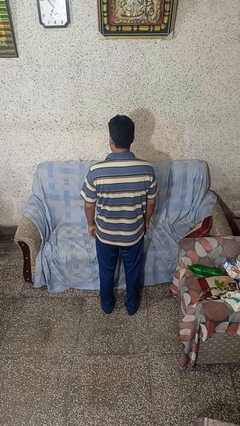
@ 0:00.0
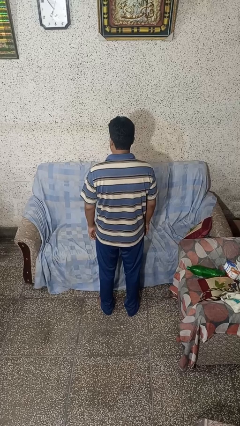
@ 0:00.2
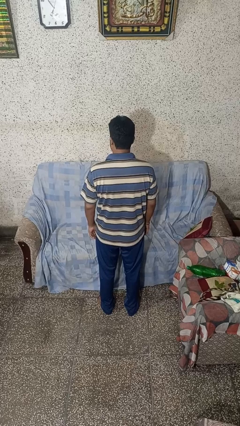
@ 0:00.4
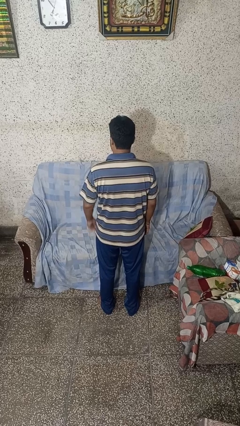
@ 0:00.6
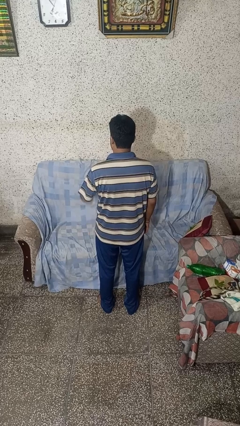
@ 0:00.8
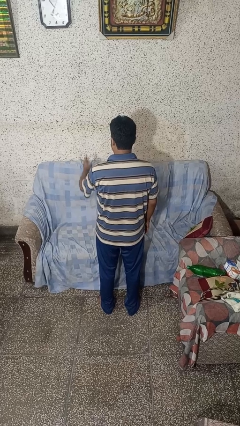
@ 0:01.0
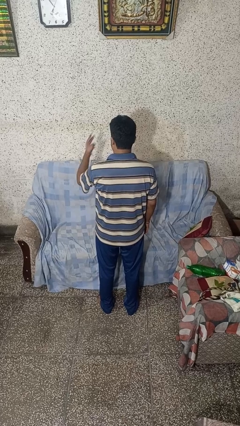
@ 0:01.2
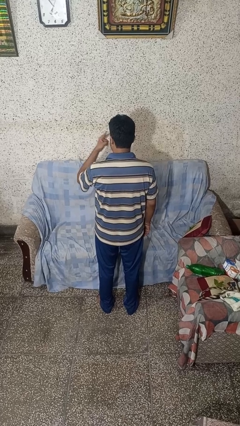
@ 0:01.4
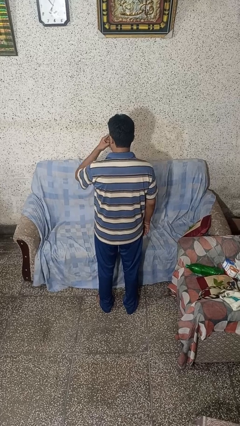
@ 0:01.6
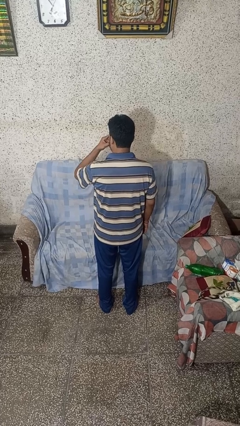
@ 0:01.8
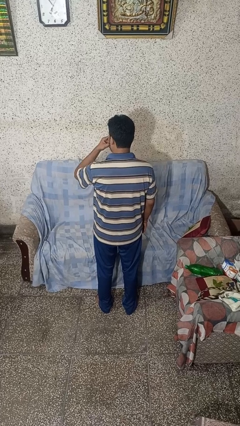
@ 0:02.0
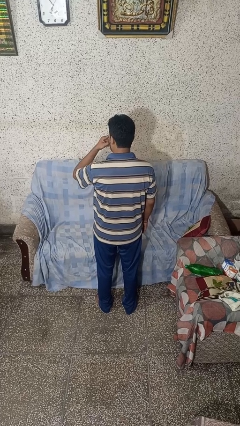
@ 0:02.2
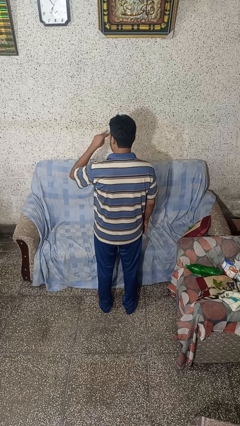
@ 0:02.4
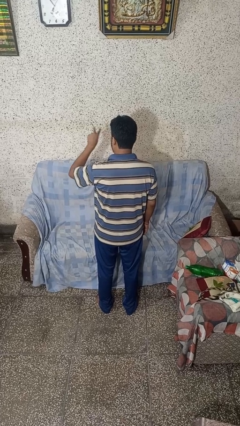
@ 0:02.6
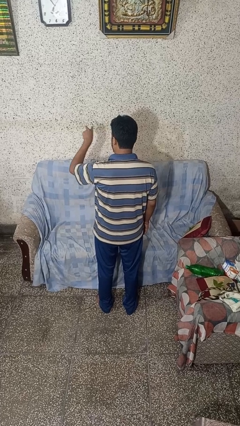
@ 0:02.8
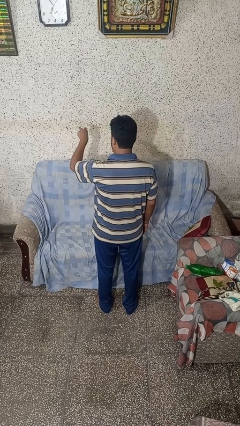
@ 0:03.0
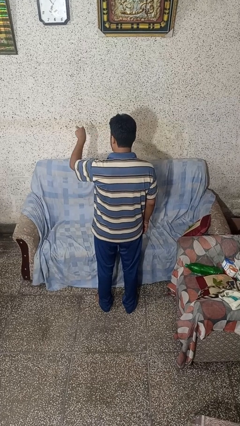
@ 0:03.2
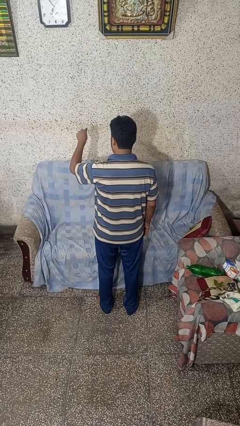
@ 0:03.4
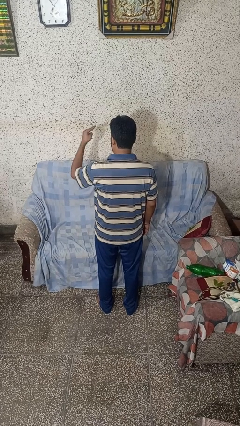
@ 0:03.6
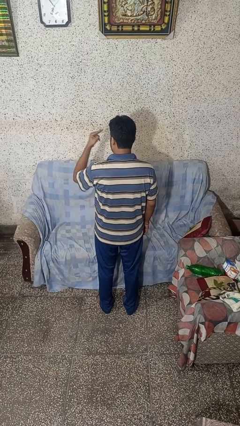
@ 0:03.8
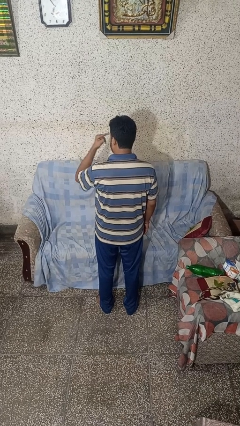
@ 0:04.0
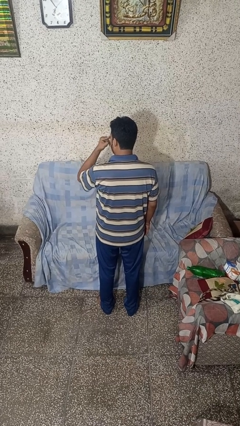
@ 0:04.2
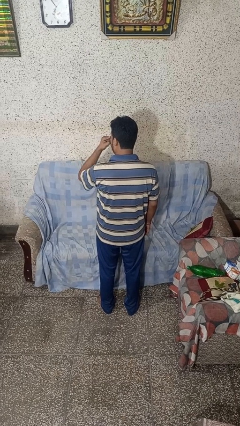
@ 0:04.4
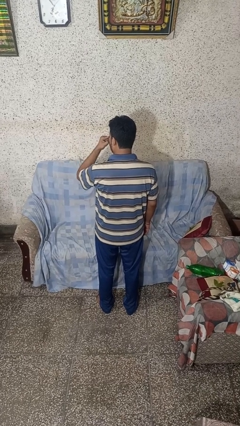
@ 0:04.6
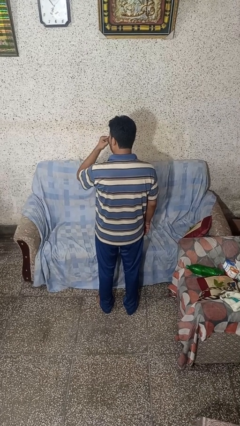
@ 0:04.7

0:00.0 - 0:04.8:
person gestures watch closely

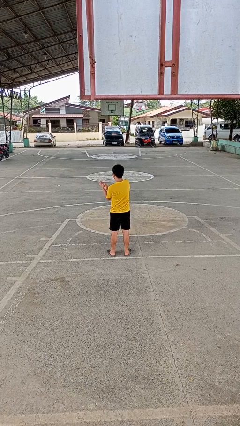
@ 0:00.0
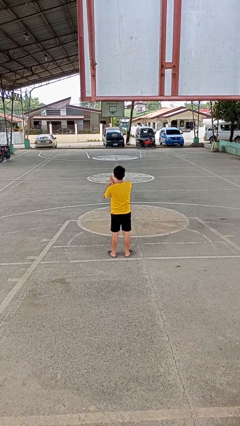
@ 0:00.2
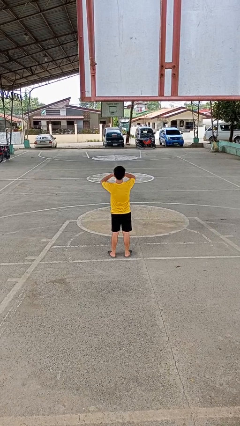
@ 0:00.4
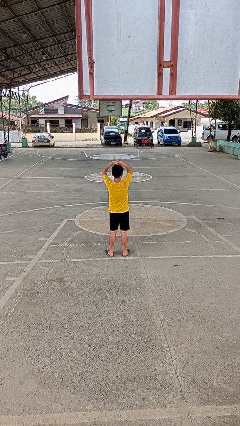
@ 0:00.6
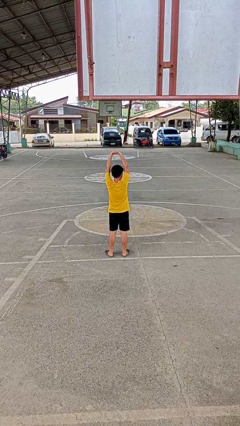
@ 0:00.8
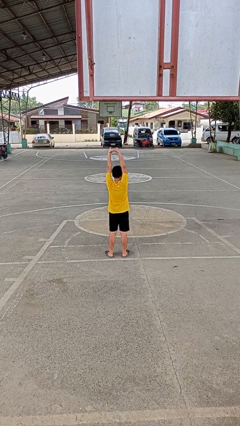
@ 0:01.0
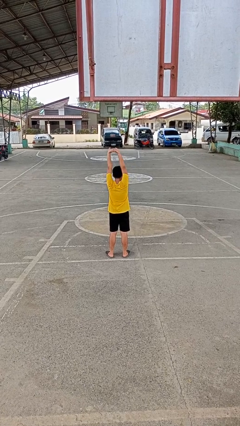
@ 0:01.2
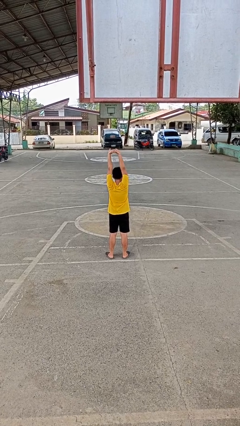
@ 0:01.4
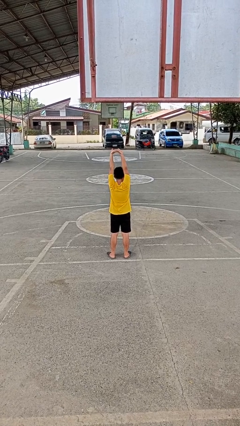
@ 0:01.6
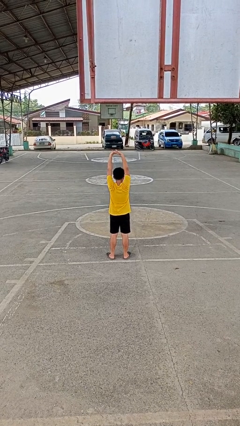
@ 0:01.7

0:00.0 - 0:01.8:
person stretches arms over head

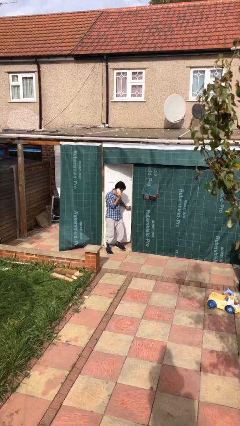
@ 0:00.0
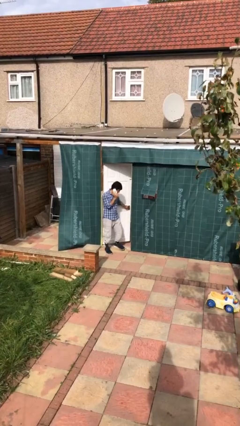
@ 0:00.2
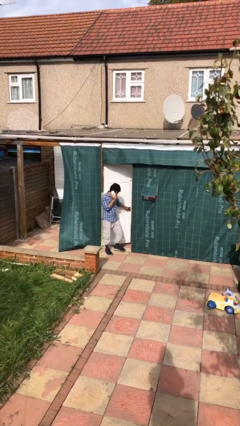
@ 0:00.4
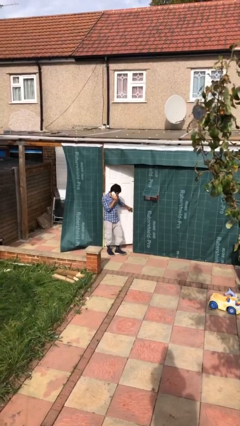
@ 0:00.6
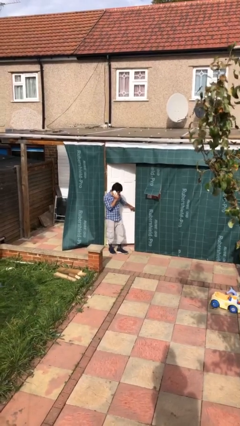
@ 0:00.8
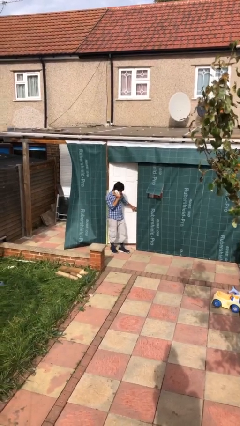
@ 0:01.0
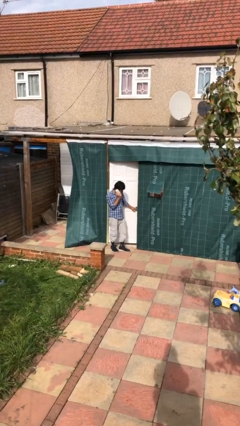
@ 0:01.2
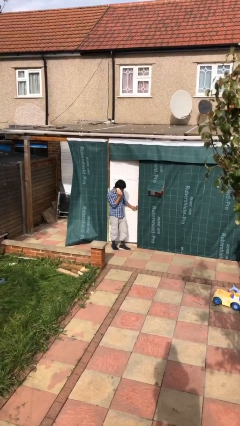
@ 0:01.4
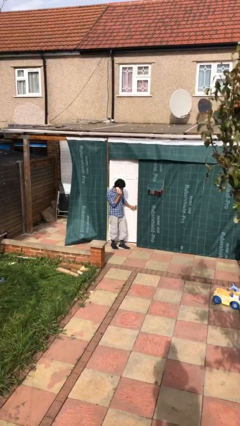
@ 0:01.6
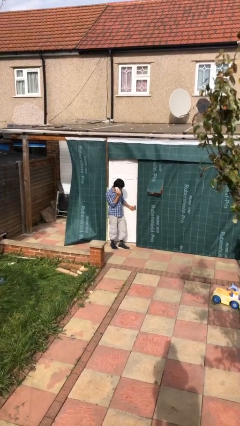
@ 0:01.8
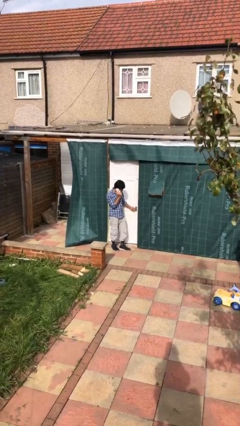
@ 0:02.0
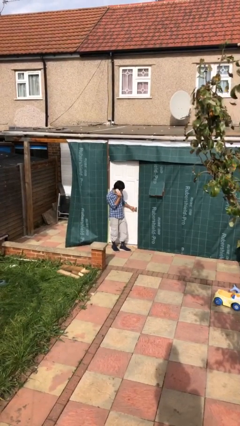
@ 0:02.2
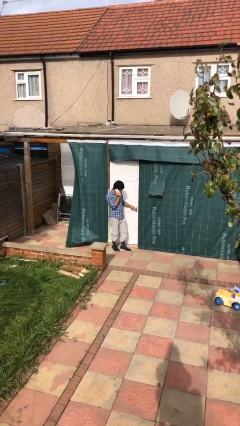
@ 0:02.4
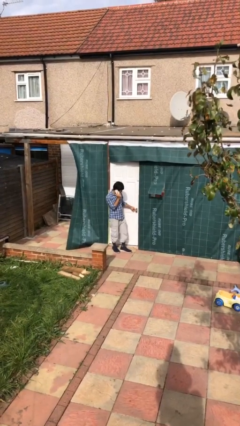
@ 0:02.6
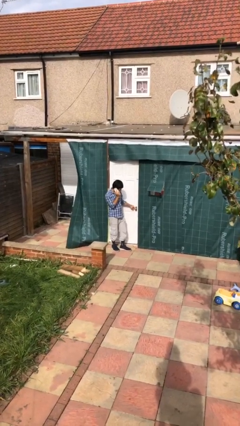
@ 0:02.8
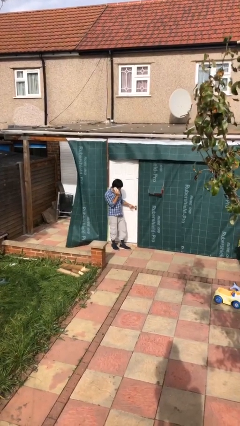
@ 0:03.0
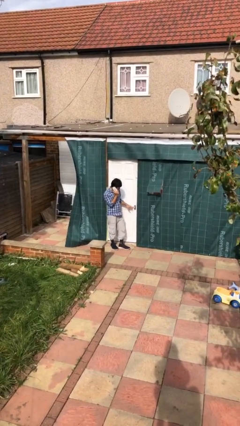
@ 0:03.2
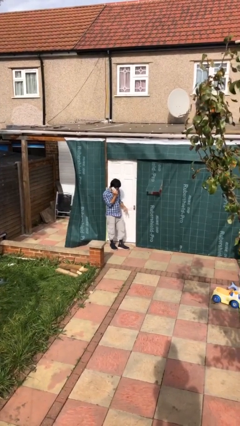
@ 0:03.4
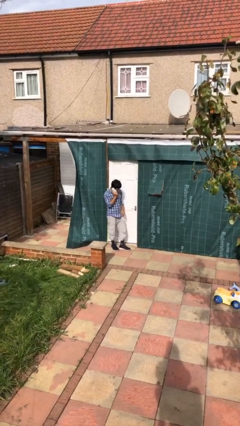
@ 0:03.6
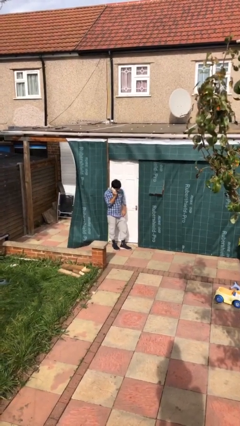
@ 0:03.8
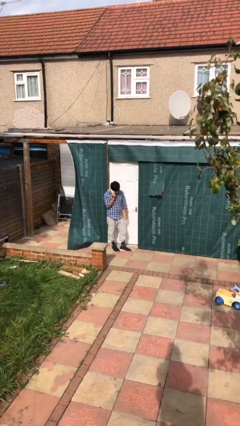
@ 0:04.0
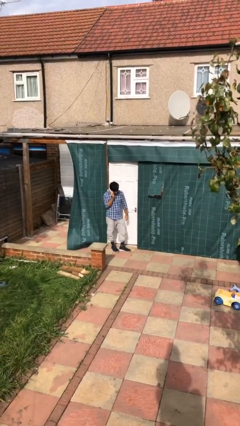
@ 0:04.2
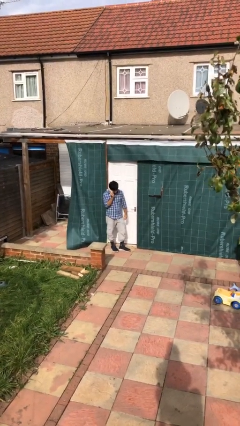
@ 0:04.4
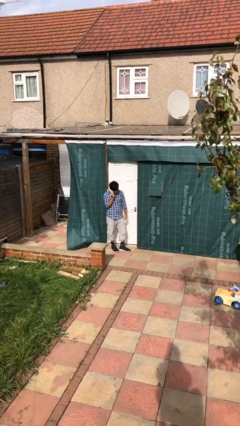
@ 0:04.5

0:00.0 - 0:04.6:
person closes facility door

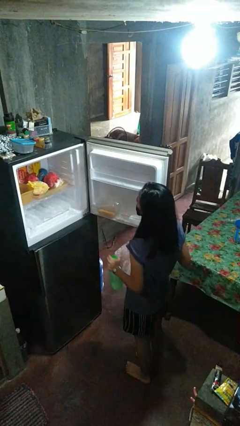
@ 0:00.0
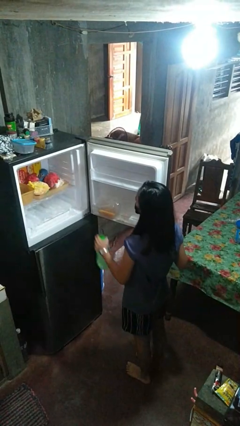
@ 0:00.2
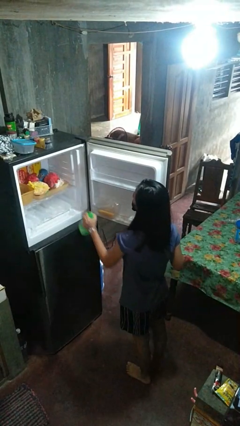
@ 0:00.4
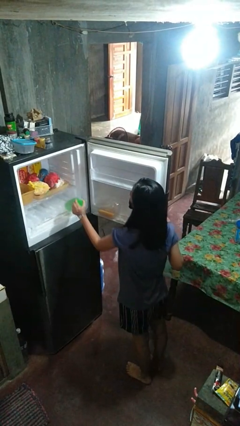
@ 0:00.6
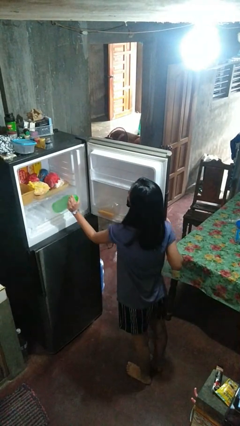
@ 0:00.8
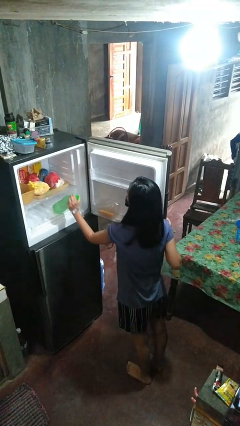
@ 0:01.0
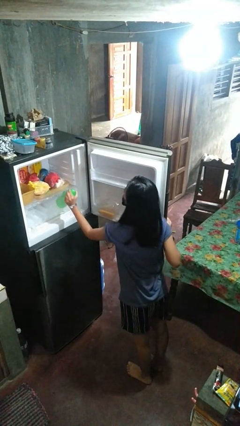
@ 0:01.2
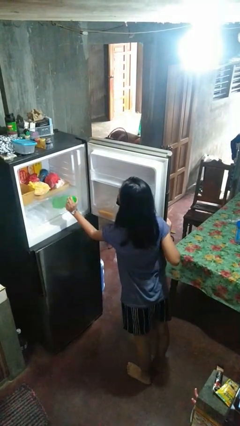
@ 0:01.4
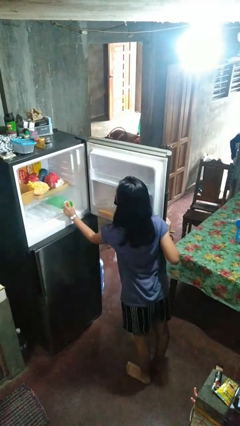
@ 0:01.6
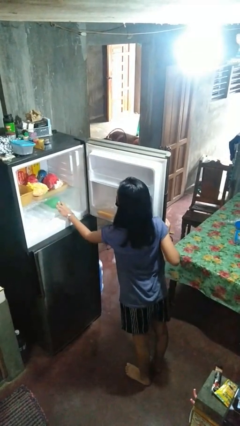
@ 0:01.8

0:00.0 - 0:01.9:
person puts object into refrigerator

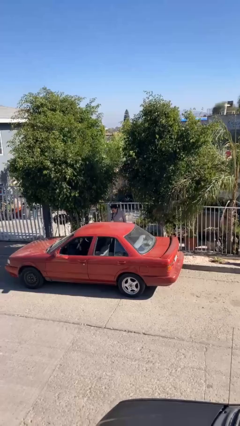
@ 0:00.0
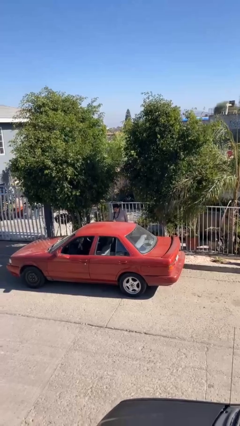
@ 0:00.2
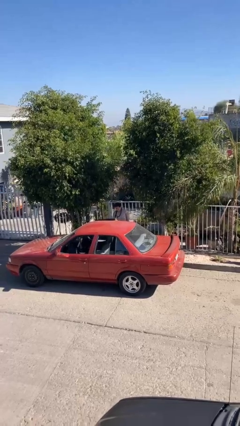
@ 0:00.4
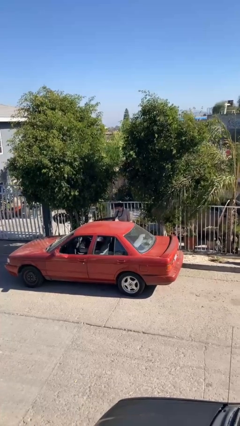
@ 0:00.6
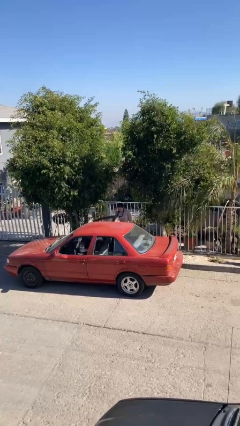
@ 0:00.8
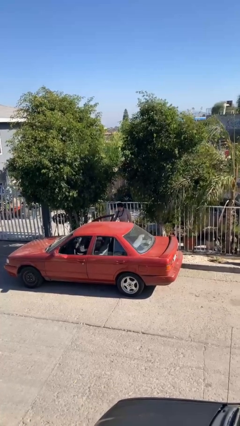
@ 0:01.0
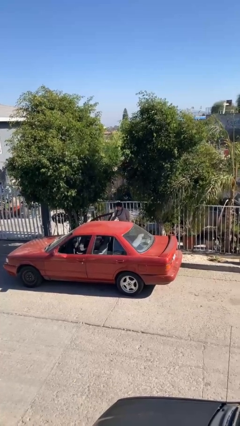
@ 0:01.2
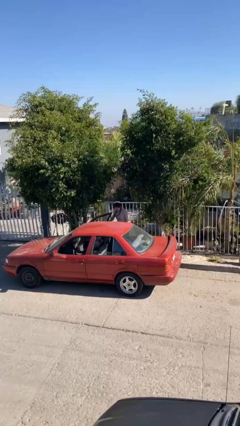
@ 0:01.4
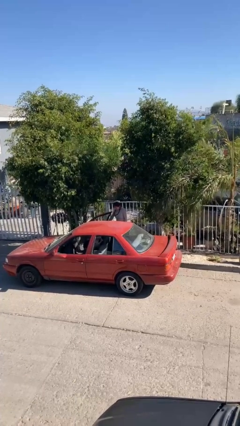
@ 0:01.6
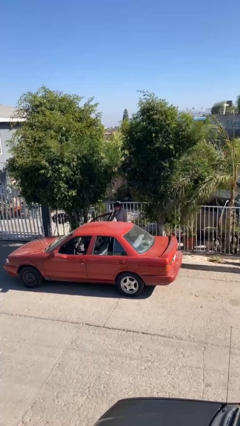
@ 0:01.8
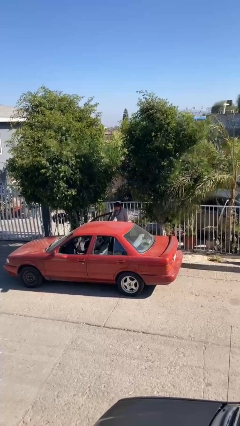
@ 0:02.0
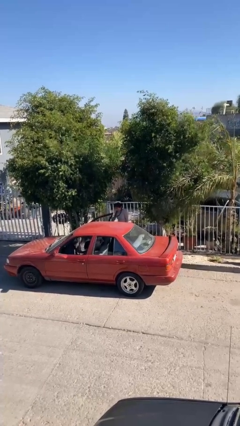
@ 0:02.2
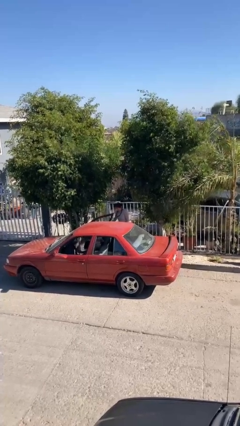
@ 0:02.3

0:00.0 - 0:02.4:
person opens car door

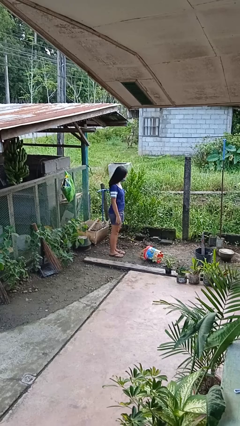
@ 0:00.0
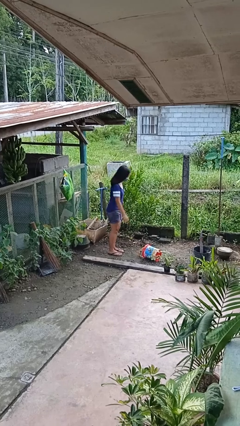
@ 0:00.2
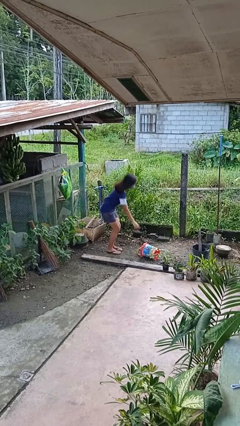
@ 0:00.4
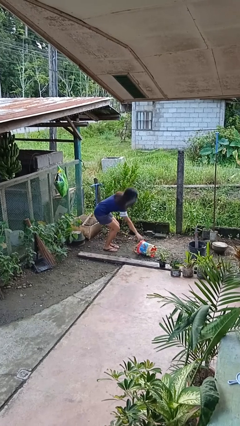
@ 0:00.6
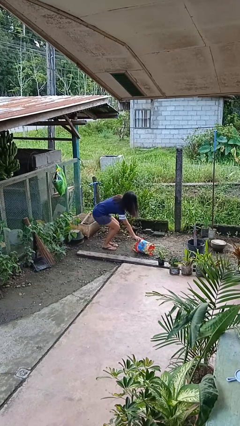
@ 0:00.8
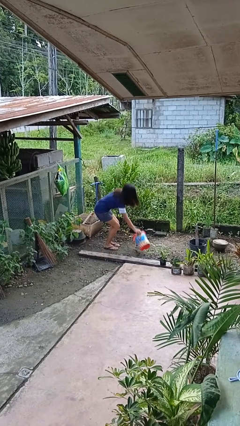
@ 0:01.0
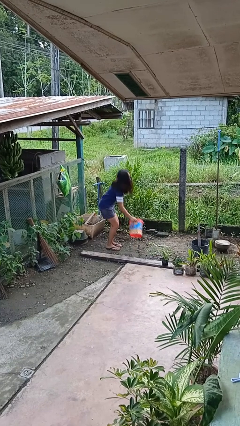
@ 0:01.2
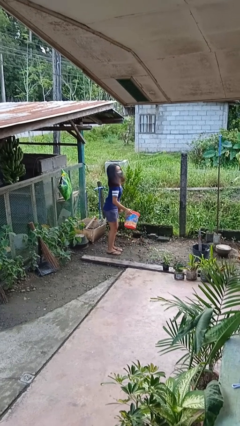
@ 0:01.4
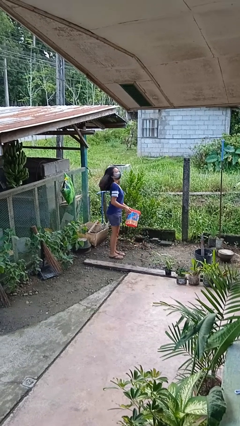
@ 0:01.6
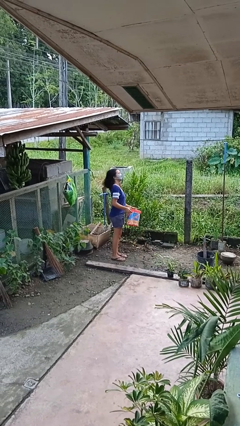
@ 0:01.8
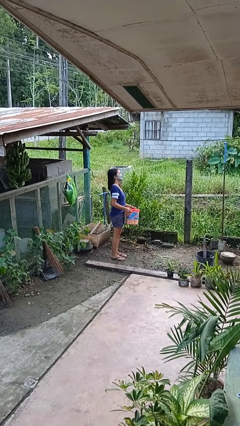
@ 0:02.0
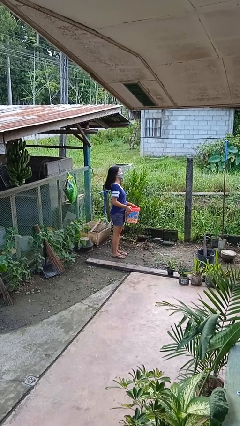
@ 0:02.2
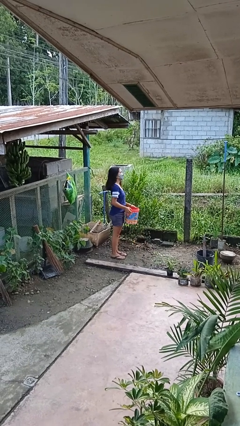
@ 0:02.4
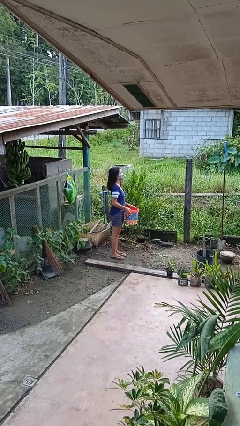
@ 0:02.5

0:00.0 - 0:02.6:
person picks up object from floor
